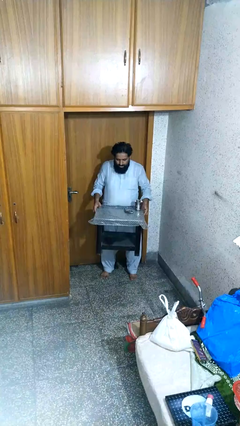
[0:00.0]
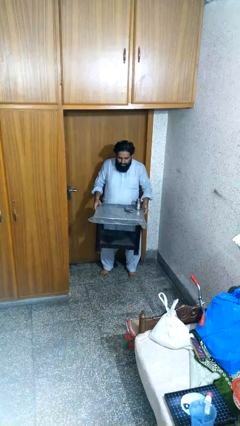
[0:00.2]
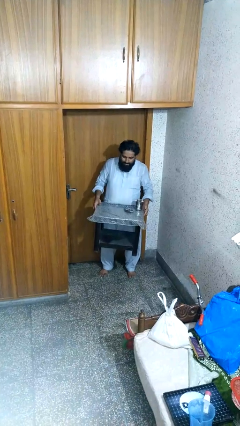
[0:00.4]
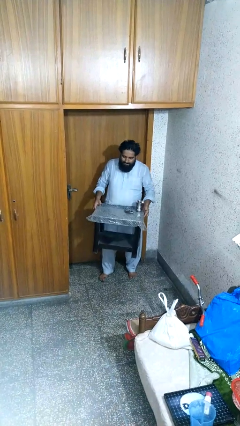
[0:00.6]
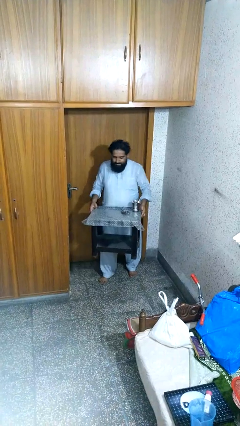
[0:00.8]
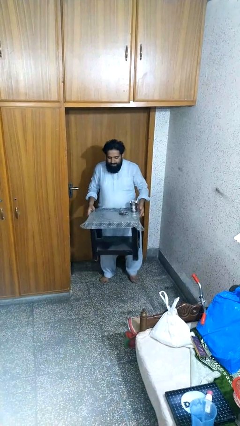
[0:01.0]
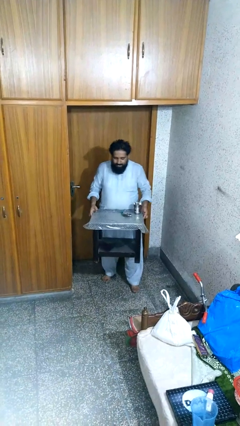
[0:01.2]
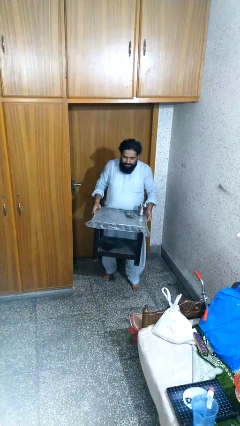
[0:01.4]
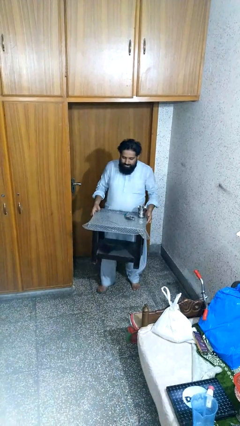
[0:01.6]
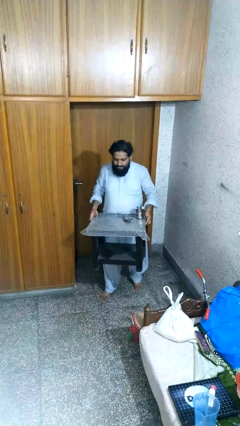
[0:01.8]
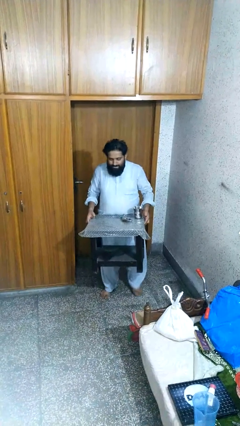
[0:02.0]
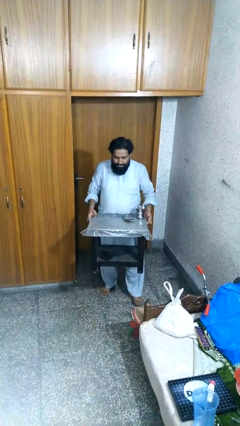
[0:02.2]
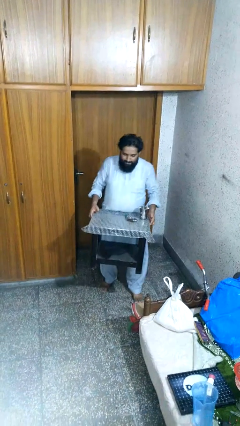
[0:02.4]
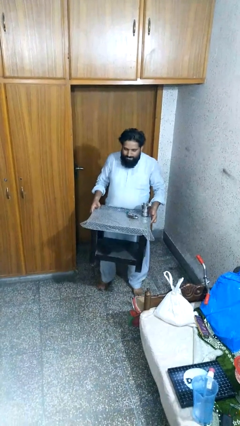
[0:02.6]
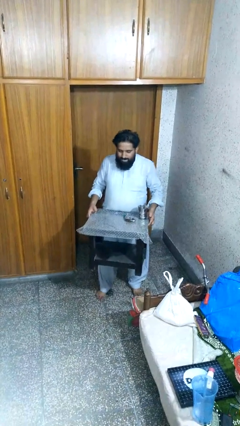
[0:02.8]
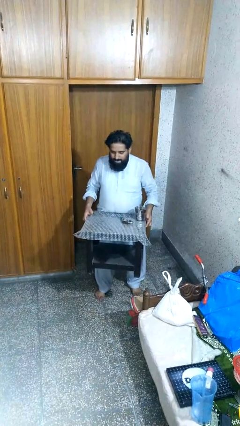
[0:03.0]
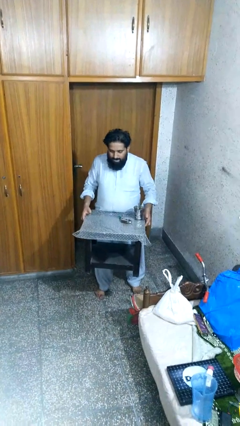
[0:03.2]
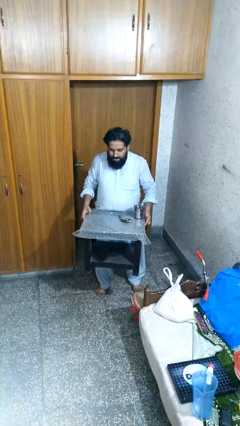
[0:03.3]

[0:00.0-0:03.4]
person carries furniture

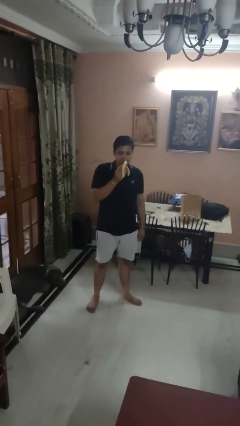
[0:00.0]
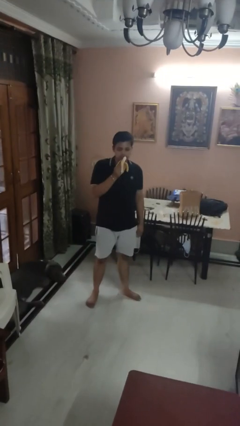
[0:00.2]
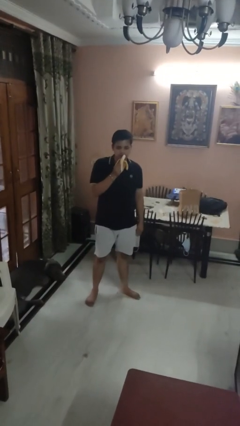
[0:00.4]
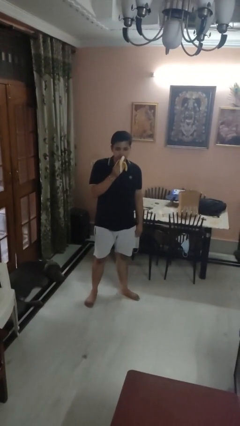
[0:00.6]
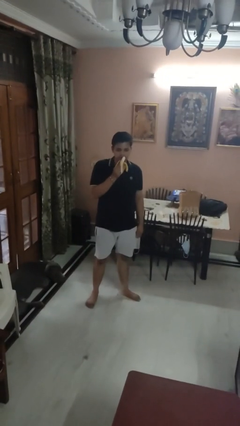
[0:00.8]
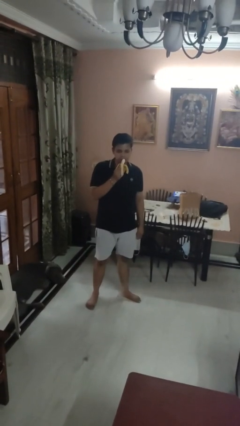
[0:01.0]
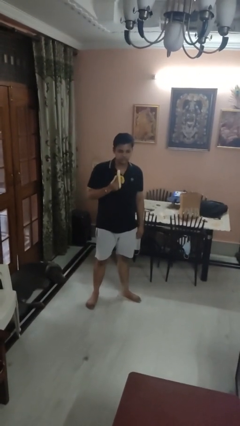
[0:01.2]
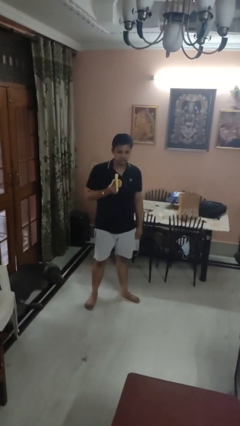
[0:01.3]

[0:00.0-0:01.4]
person eats banana

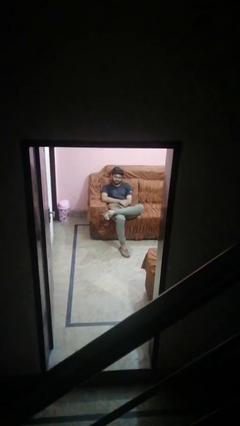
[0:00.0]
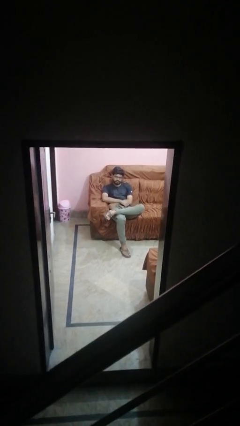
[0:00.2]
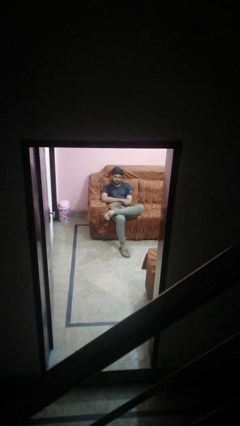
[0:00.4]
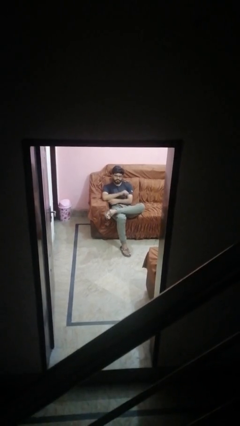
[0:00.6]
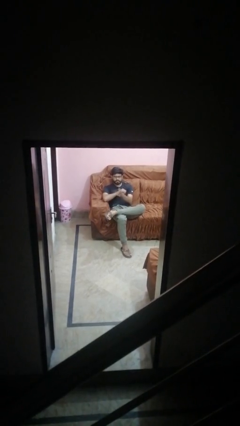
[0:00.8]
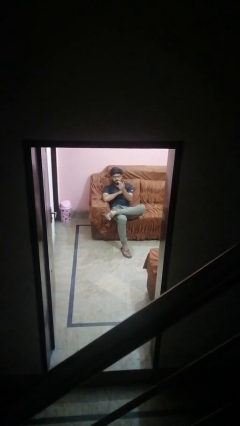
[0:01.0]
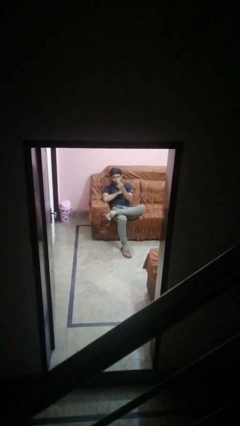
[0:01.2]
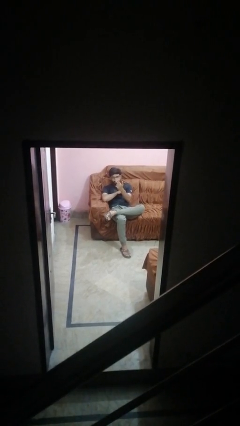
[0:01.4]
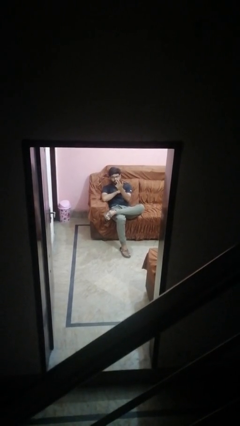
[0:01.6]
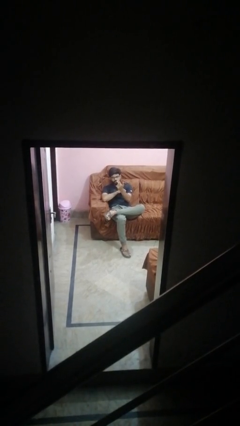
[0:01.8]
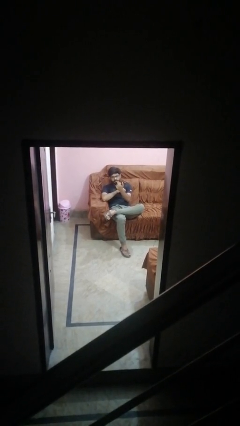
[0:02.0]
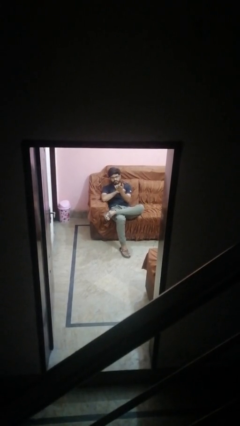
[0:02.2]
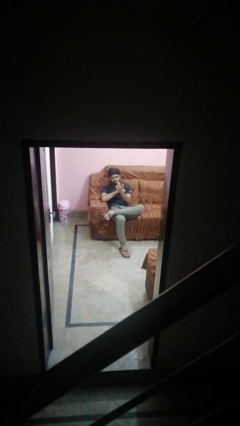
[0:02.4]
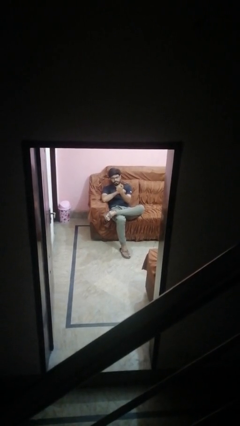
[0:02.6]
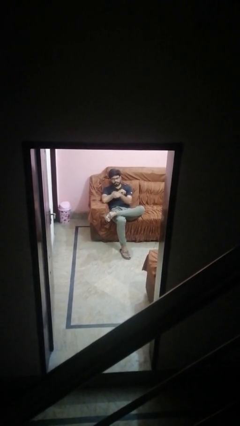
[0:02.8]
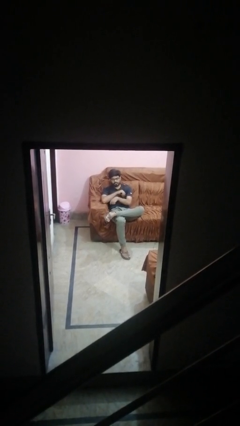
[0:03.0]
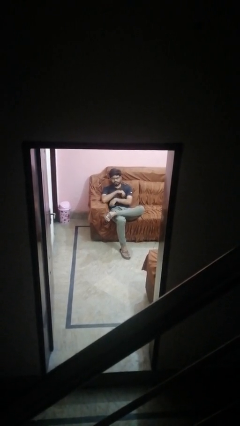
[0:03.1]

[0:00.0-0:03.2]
person gestures come here

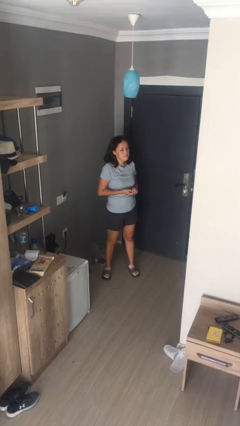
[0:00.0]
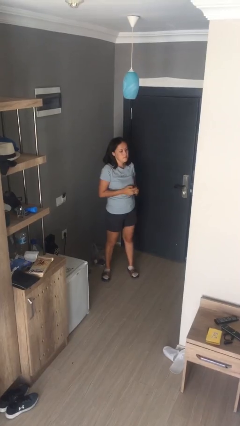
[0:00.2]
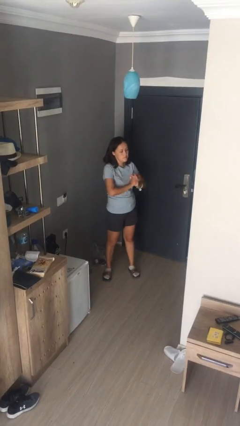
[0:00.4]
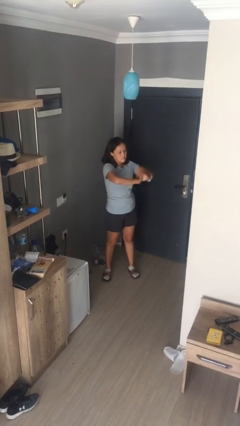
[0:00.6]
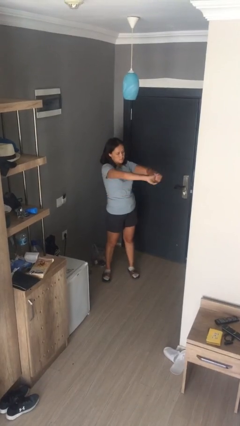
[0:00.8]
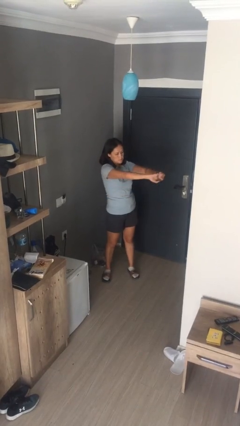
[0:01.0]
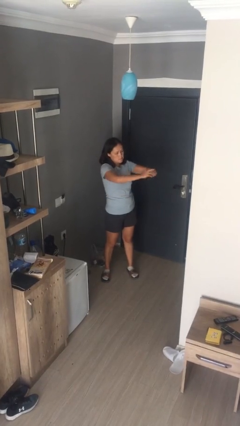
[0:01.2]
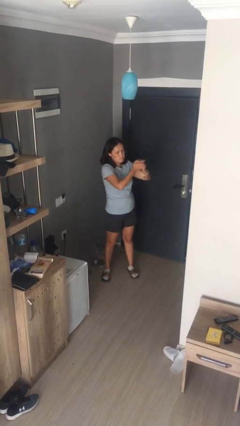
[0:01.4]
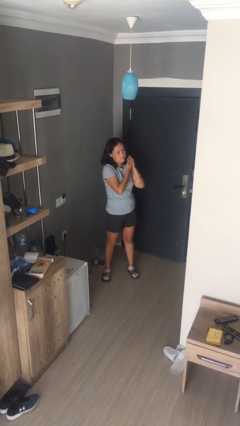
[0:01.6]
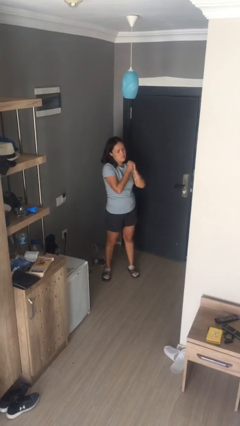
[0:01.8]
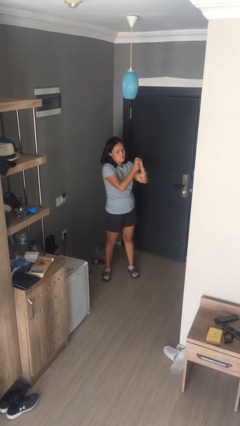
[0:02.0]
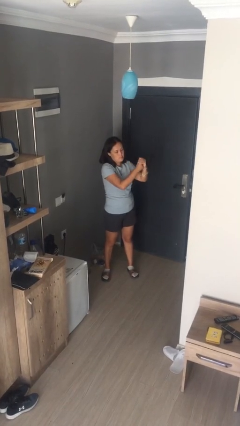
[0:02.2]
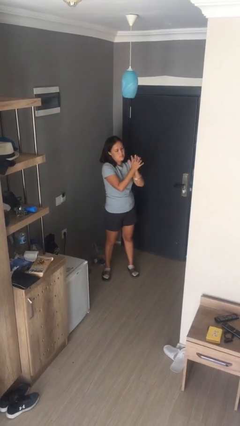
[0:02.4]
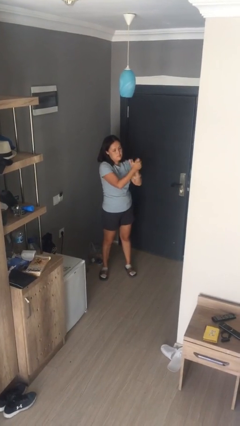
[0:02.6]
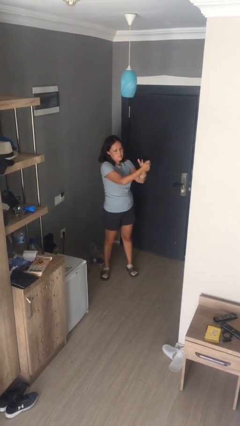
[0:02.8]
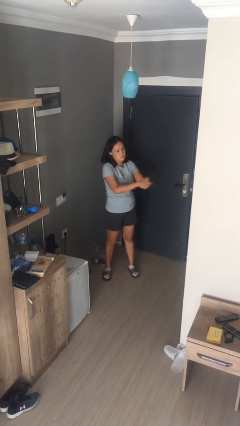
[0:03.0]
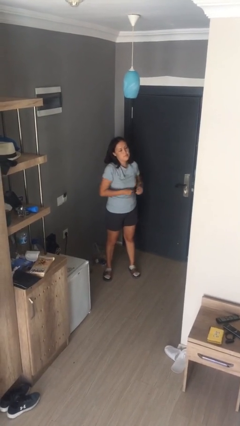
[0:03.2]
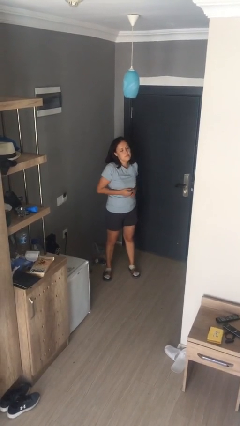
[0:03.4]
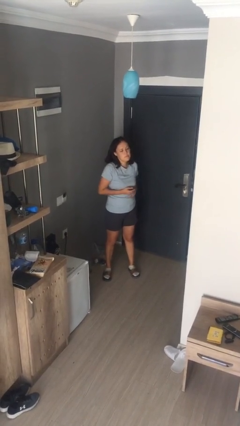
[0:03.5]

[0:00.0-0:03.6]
person cracks knuckles

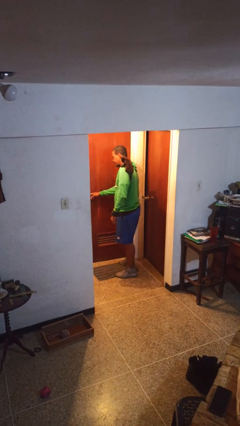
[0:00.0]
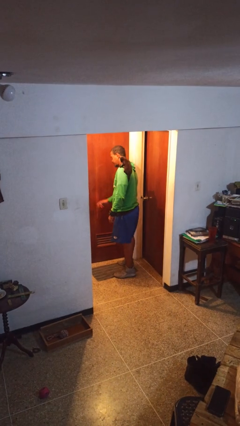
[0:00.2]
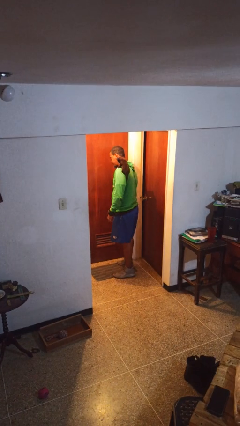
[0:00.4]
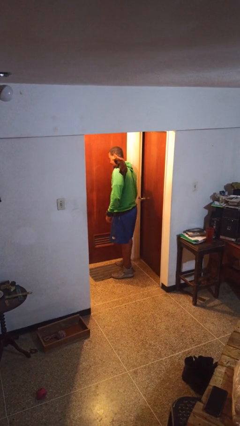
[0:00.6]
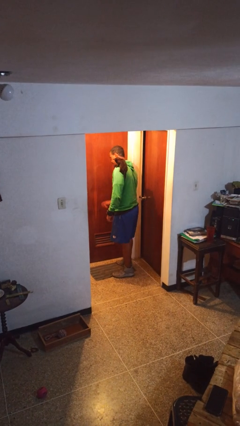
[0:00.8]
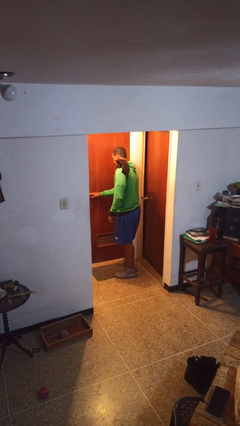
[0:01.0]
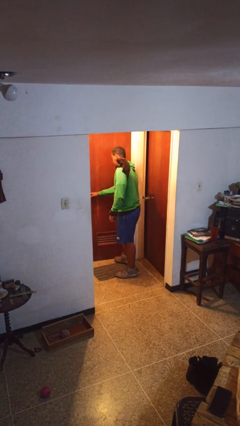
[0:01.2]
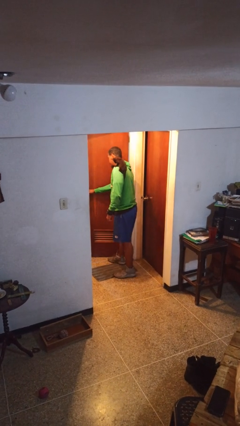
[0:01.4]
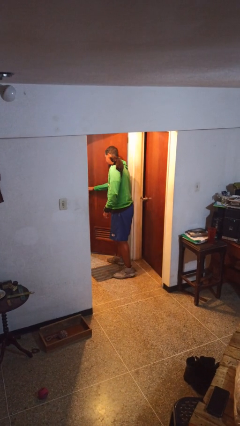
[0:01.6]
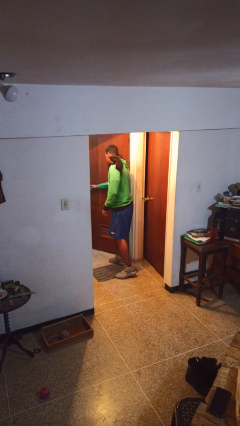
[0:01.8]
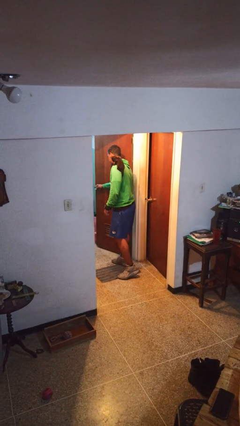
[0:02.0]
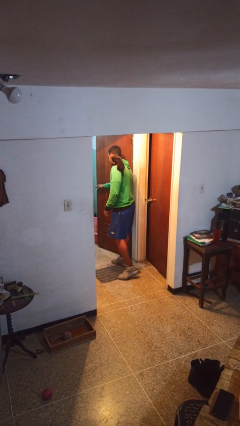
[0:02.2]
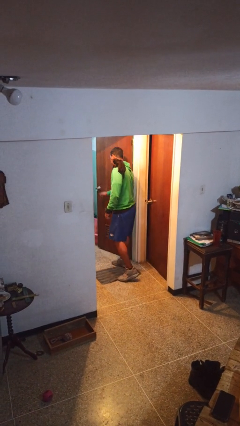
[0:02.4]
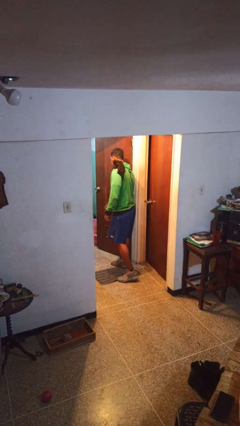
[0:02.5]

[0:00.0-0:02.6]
person opens facility door

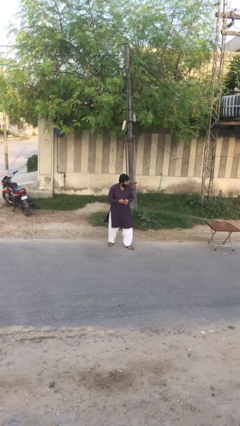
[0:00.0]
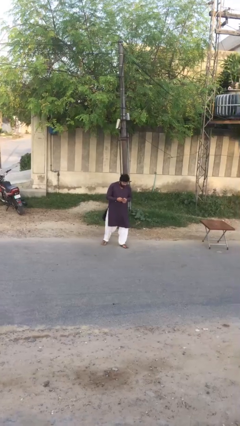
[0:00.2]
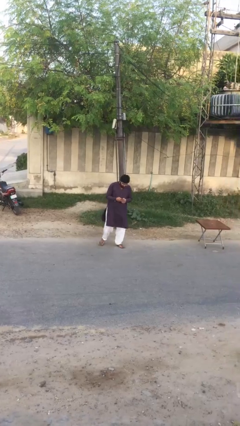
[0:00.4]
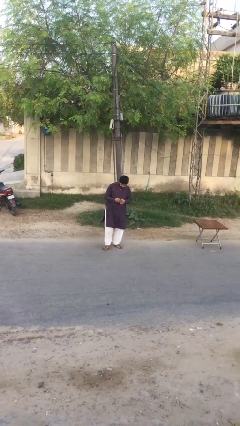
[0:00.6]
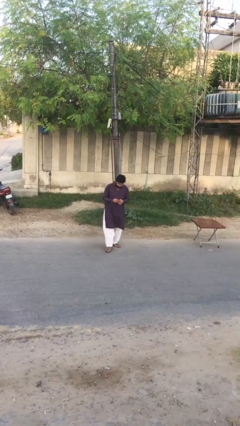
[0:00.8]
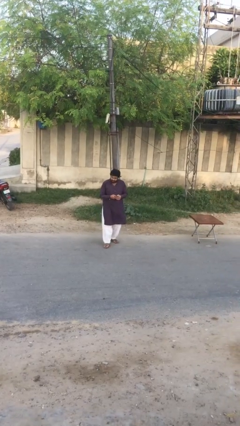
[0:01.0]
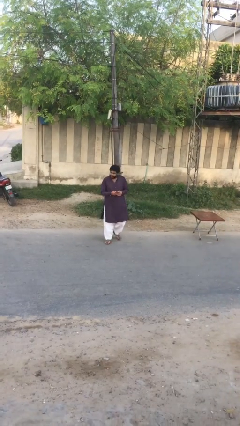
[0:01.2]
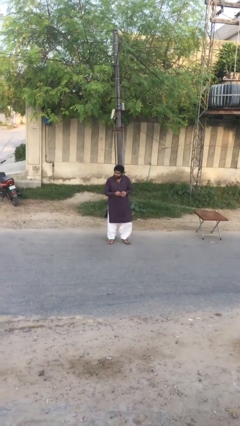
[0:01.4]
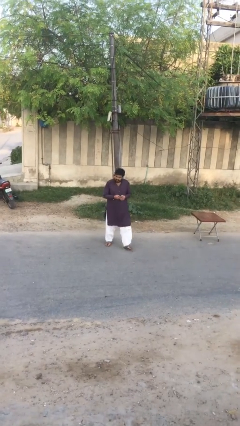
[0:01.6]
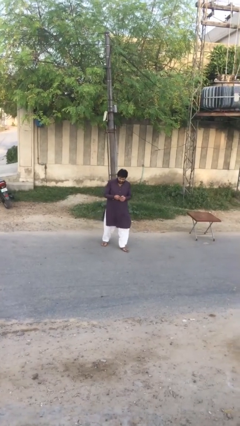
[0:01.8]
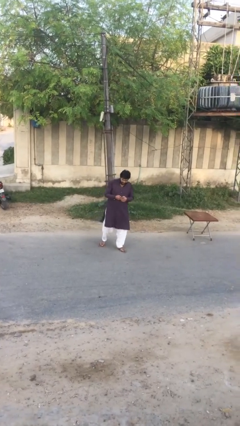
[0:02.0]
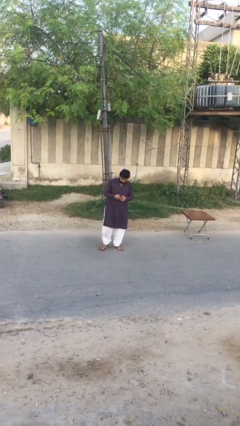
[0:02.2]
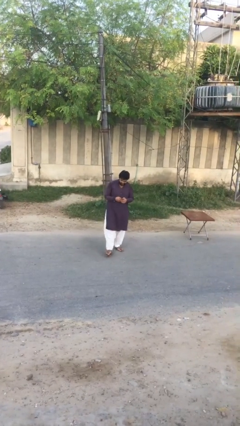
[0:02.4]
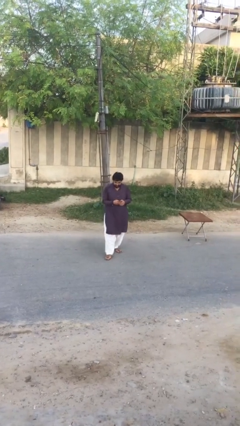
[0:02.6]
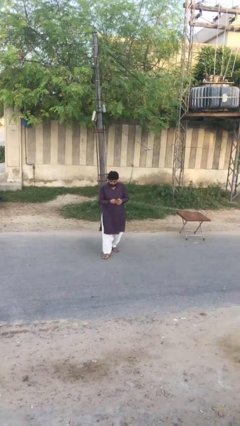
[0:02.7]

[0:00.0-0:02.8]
person texts on phone

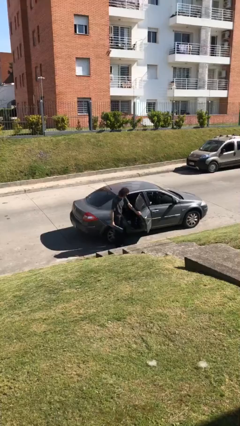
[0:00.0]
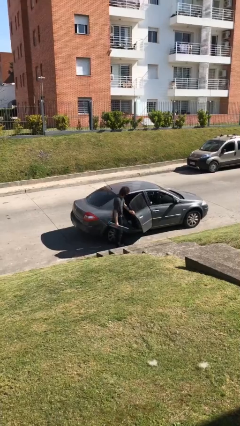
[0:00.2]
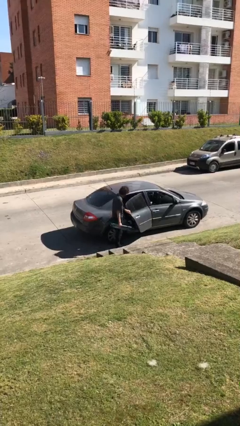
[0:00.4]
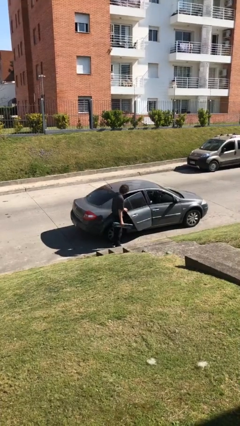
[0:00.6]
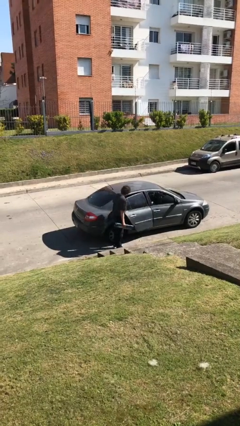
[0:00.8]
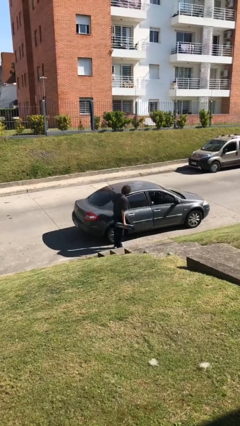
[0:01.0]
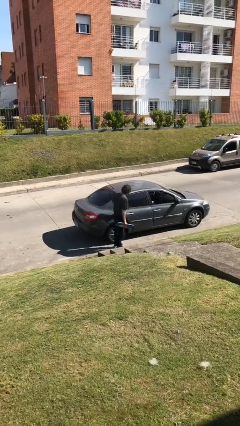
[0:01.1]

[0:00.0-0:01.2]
person closes car door
